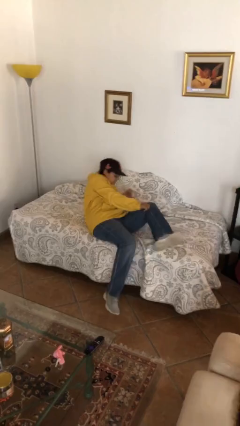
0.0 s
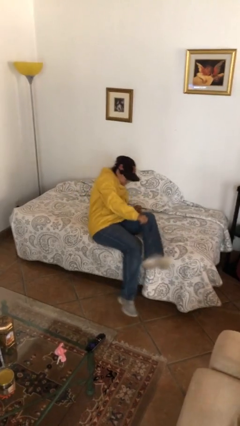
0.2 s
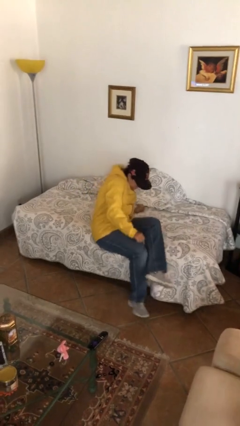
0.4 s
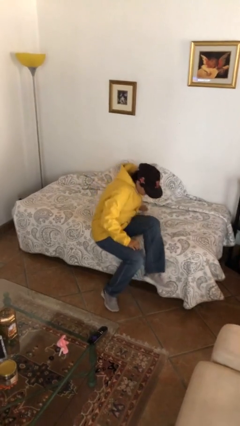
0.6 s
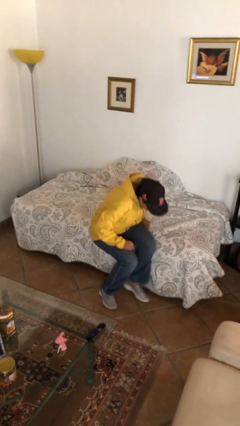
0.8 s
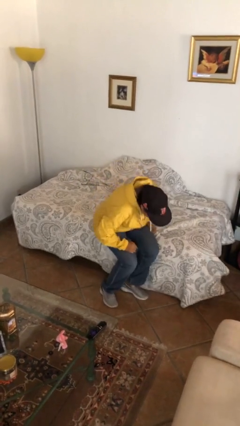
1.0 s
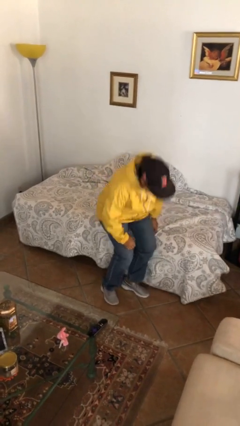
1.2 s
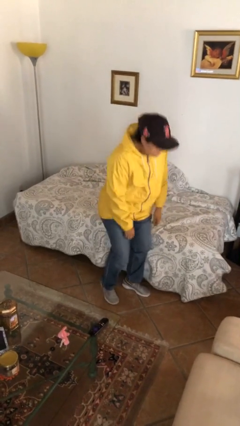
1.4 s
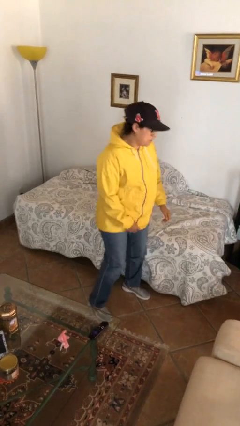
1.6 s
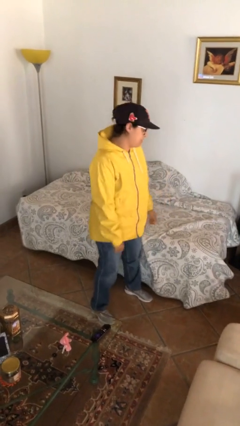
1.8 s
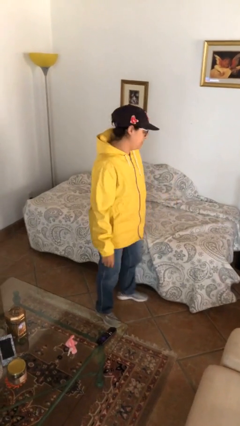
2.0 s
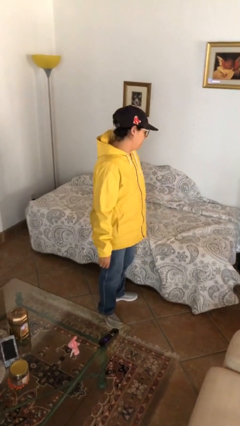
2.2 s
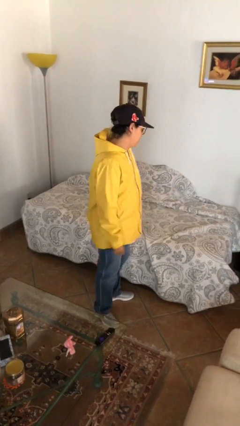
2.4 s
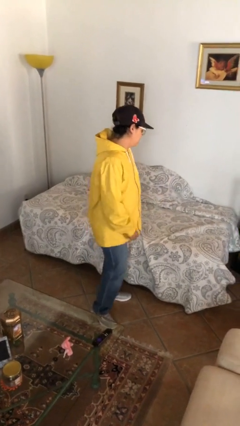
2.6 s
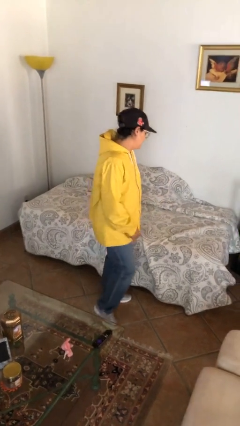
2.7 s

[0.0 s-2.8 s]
person stands up

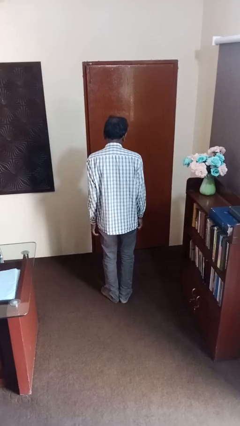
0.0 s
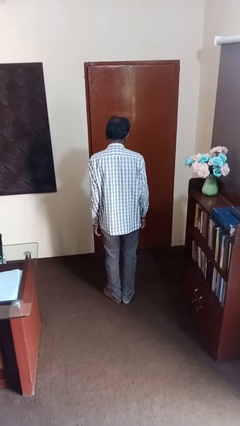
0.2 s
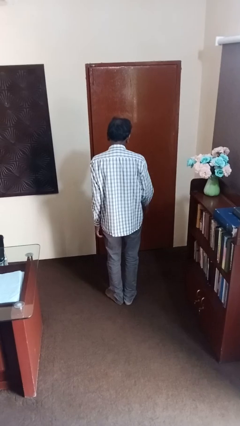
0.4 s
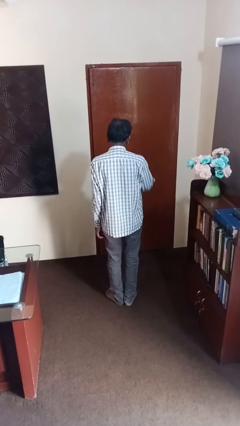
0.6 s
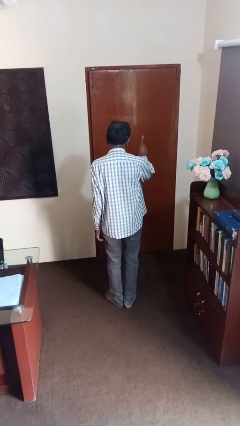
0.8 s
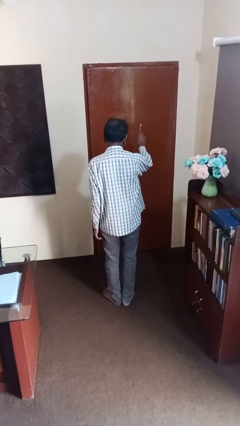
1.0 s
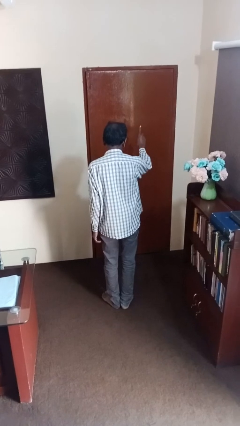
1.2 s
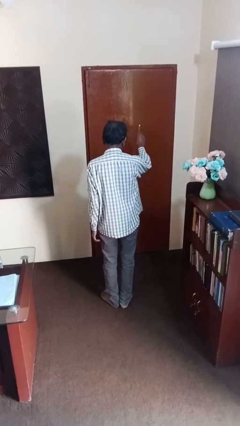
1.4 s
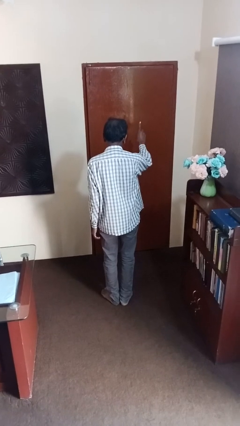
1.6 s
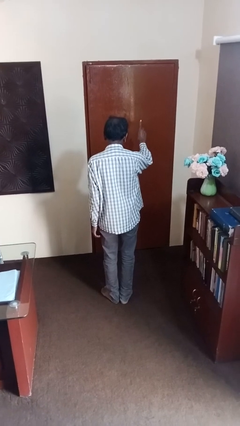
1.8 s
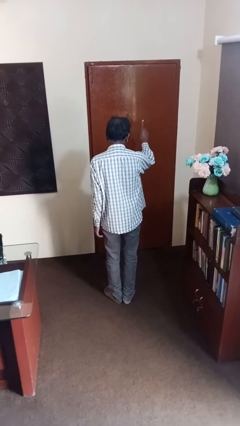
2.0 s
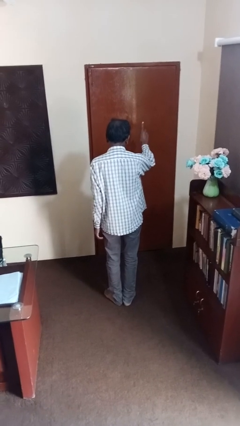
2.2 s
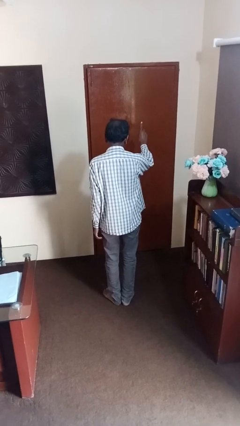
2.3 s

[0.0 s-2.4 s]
person gestures number one

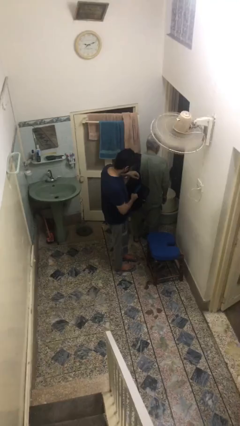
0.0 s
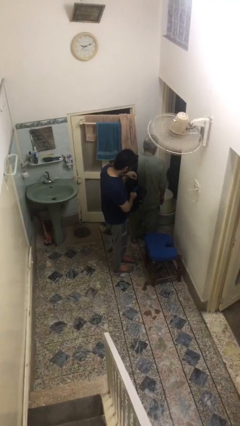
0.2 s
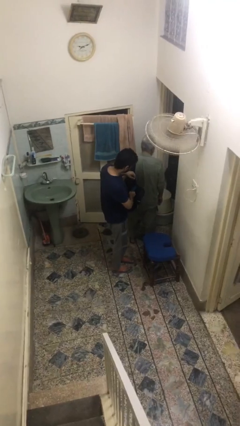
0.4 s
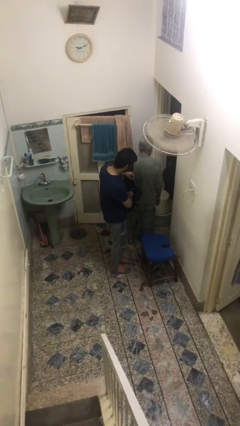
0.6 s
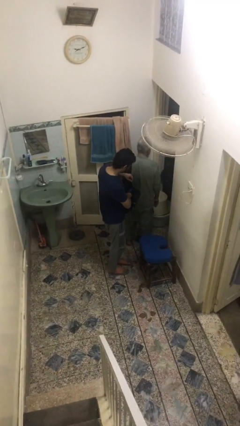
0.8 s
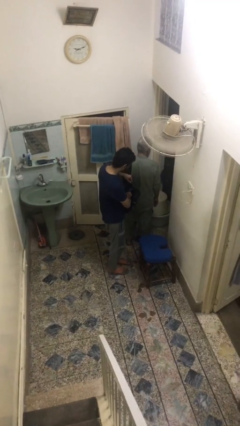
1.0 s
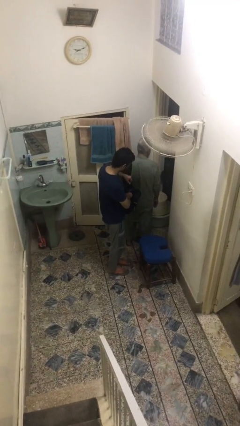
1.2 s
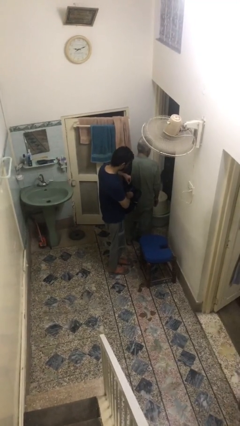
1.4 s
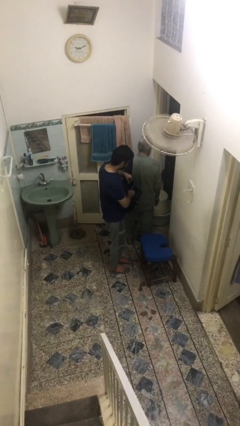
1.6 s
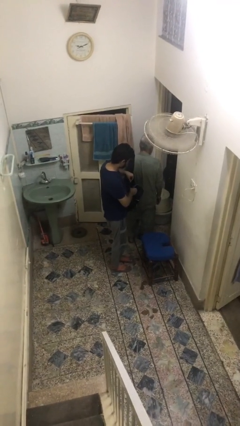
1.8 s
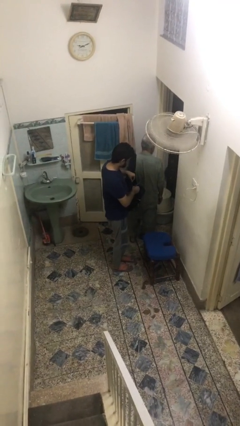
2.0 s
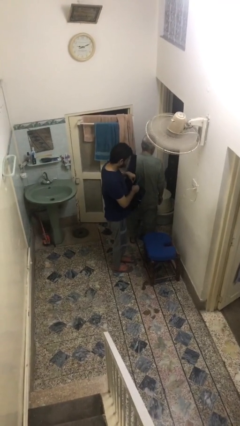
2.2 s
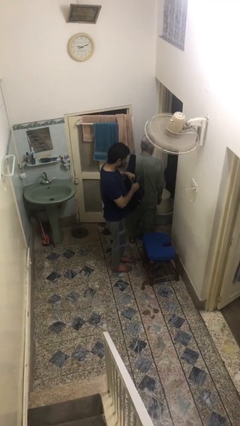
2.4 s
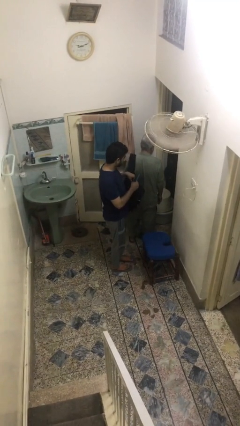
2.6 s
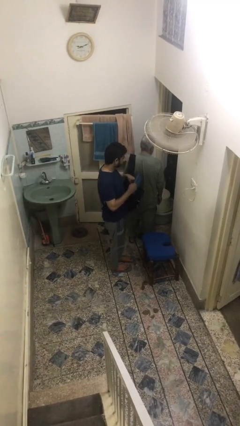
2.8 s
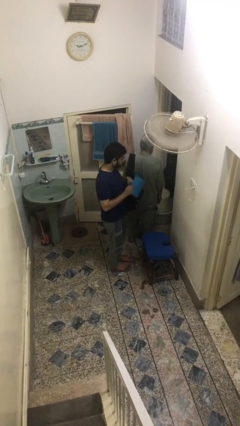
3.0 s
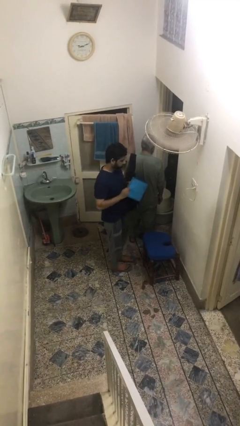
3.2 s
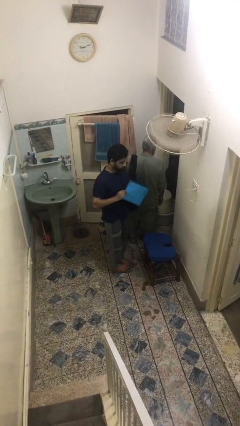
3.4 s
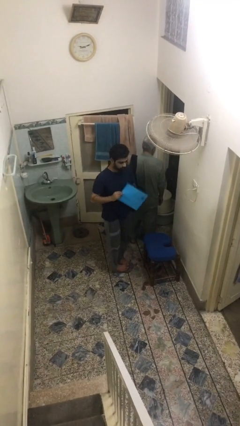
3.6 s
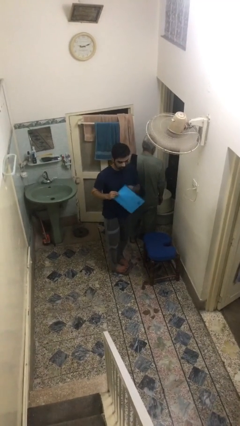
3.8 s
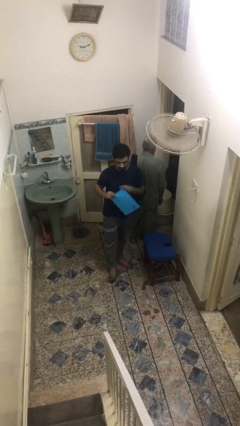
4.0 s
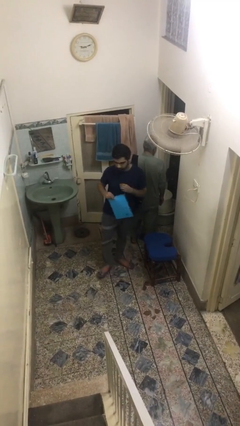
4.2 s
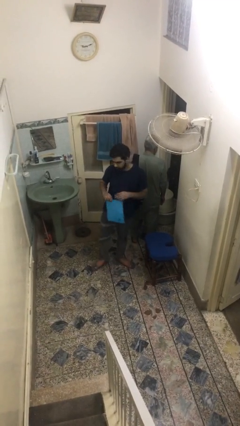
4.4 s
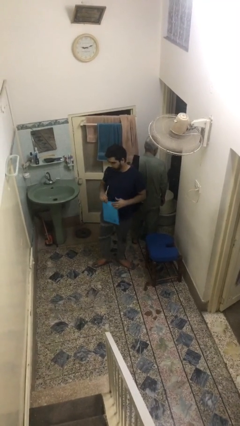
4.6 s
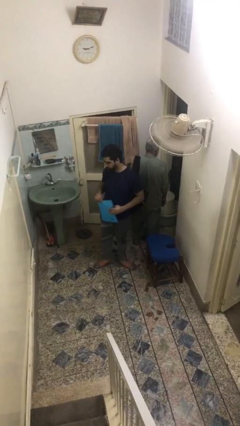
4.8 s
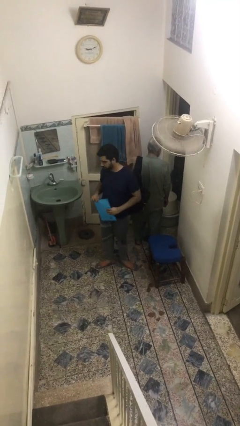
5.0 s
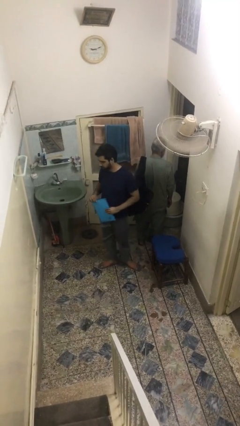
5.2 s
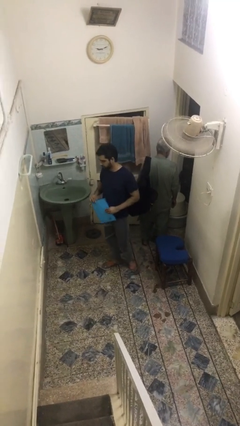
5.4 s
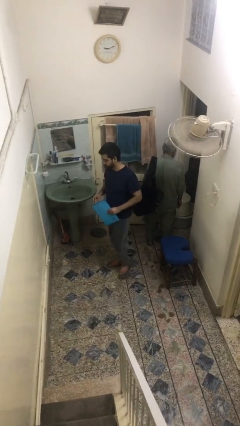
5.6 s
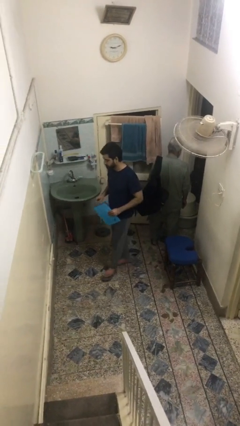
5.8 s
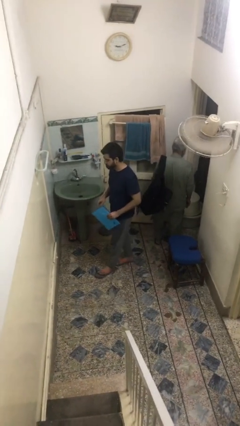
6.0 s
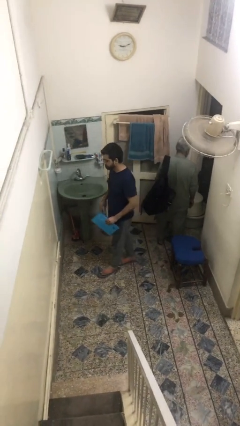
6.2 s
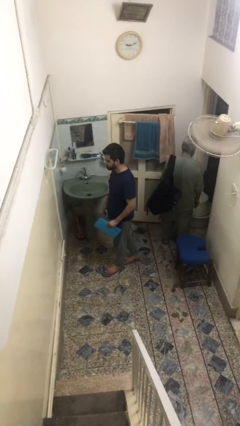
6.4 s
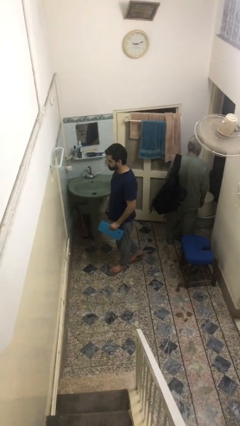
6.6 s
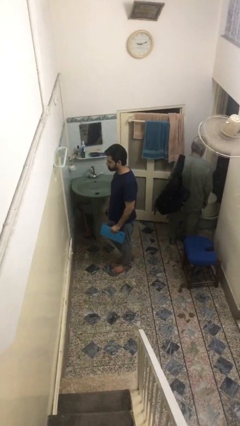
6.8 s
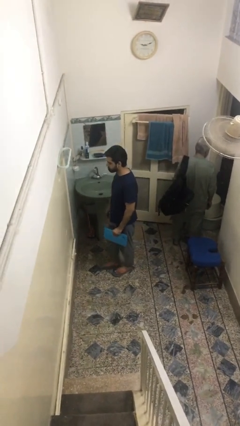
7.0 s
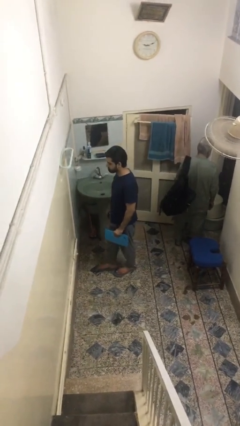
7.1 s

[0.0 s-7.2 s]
person steals object from person

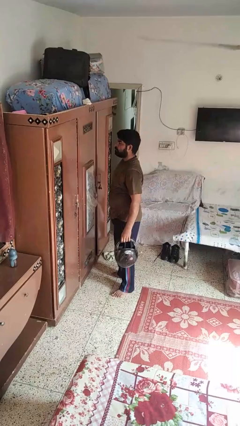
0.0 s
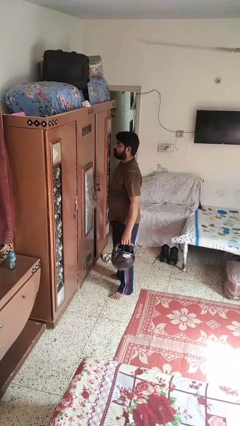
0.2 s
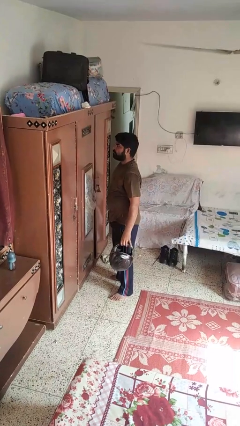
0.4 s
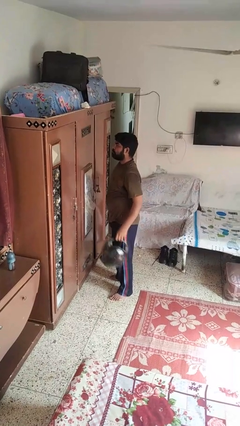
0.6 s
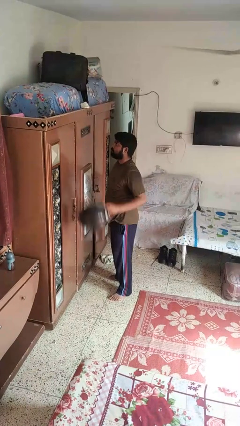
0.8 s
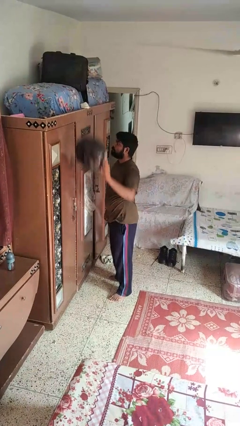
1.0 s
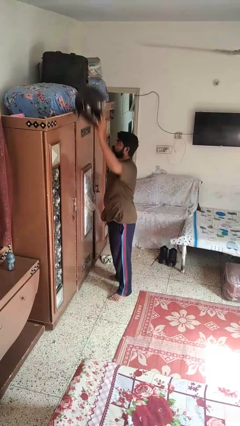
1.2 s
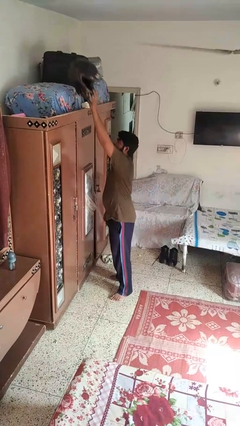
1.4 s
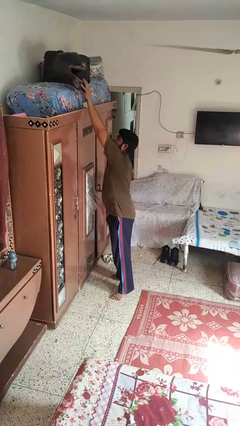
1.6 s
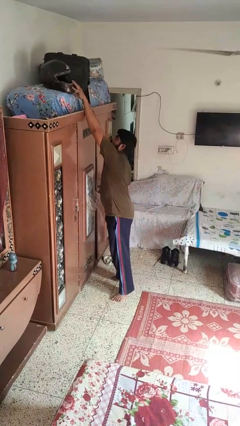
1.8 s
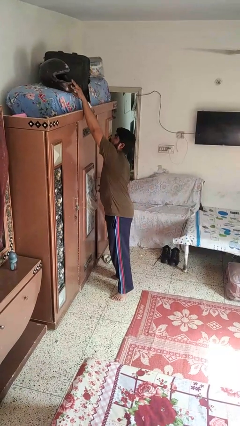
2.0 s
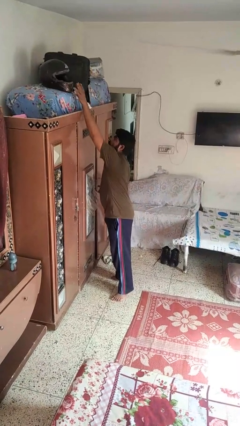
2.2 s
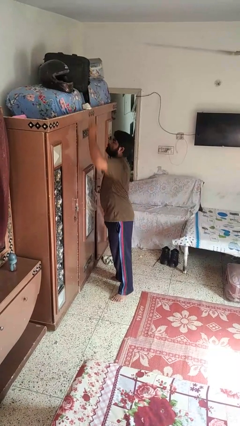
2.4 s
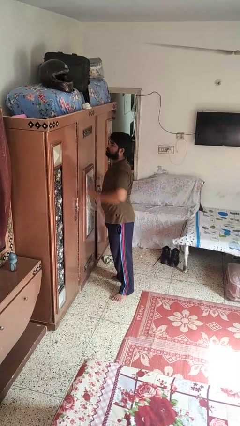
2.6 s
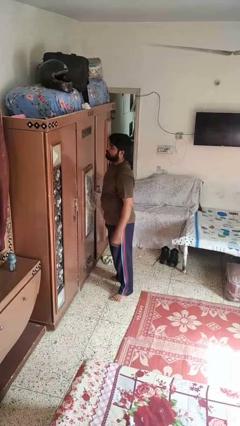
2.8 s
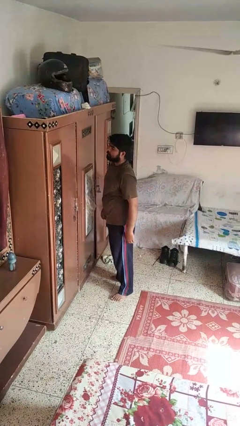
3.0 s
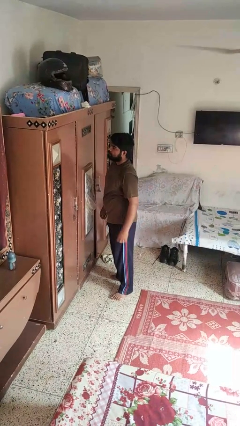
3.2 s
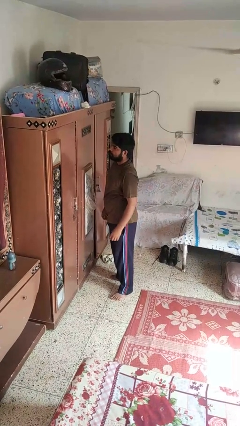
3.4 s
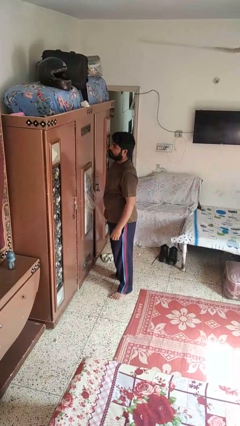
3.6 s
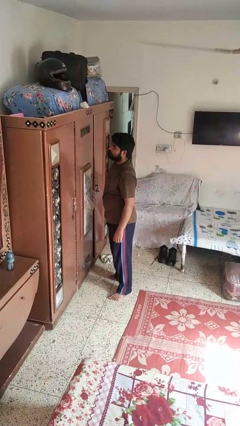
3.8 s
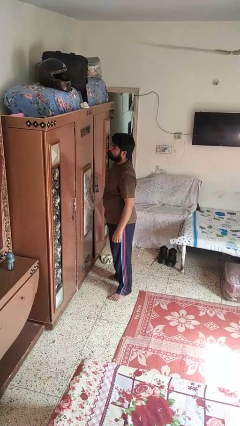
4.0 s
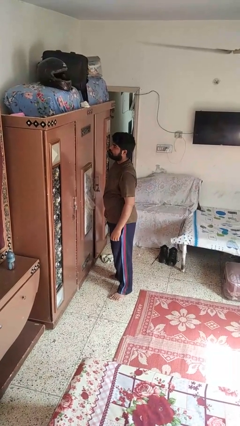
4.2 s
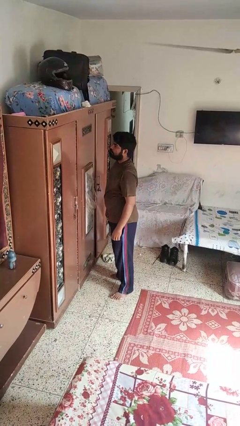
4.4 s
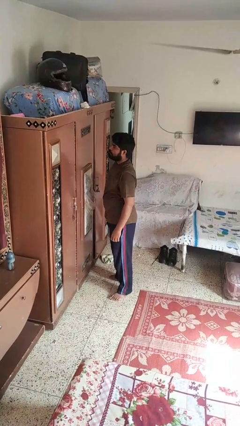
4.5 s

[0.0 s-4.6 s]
person puts down object on shelf

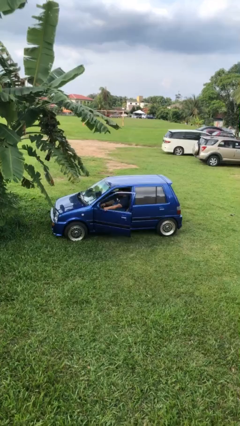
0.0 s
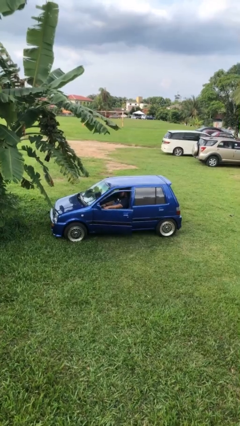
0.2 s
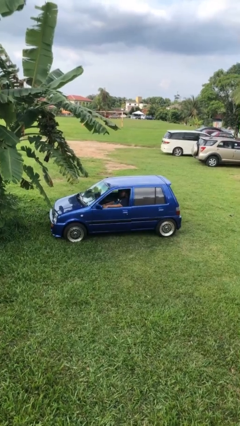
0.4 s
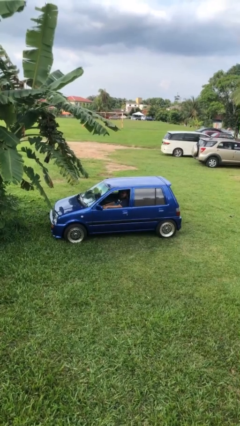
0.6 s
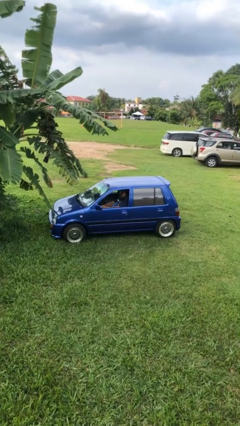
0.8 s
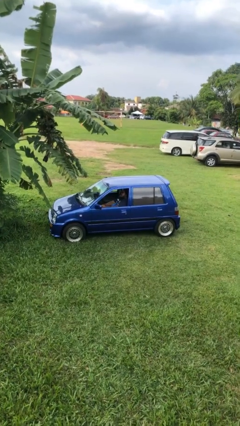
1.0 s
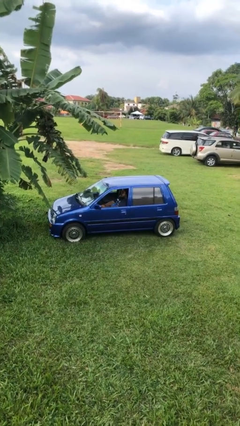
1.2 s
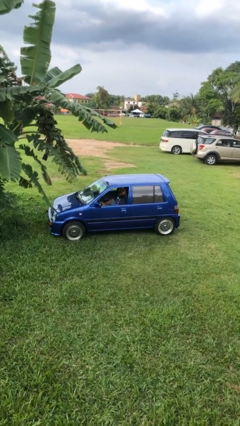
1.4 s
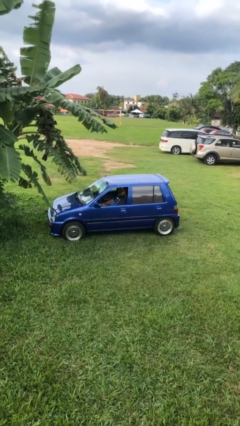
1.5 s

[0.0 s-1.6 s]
person closes car door
